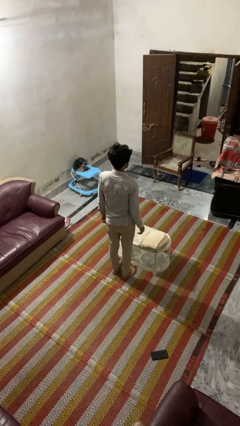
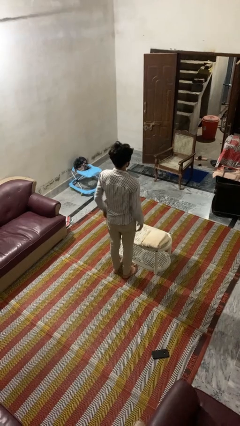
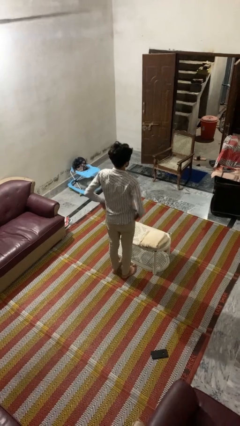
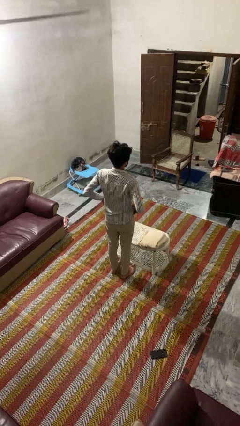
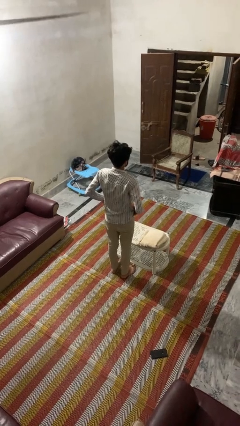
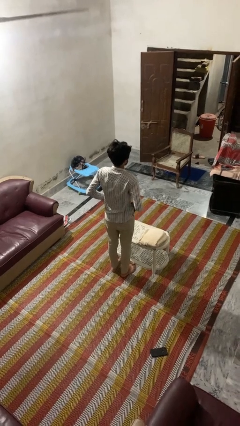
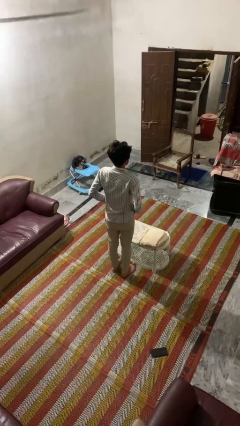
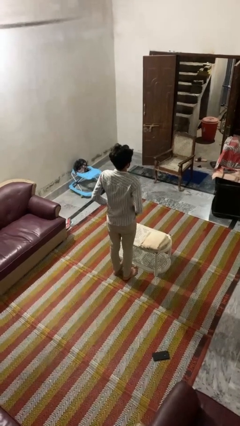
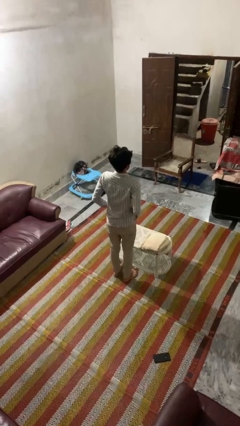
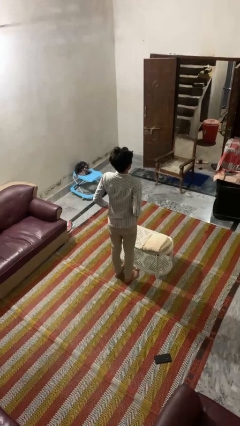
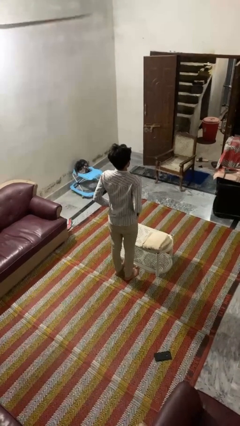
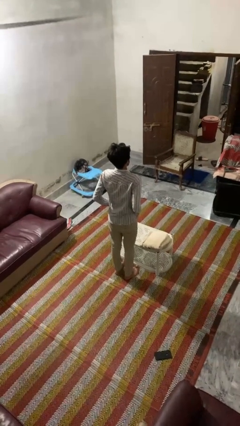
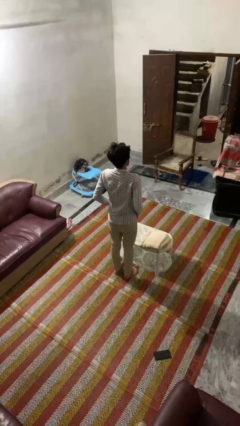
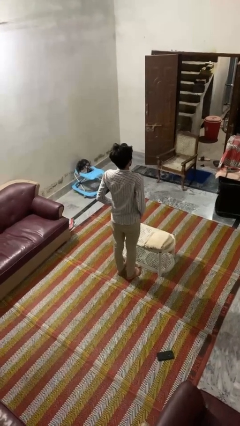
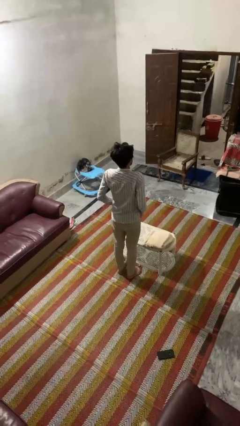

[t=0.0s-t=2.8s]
person puts hands in back pockets

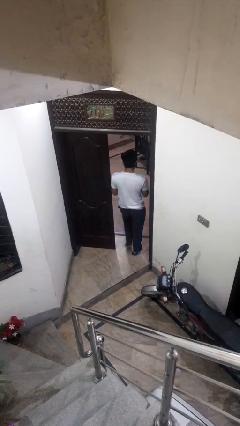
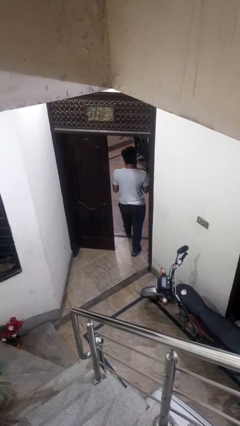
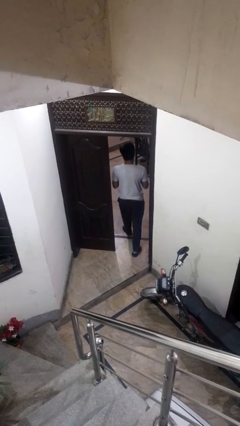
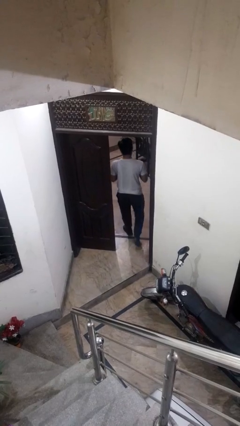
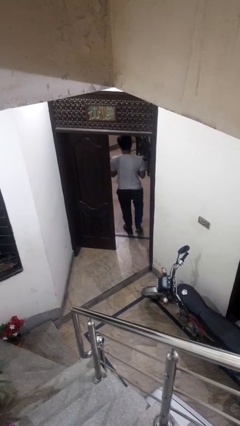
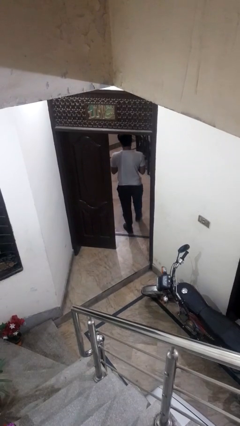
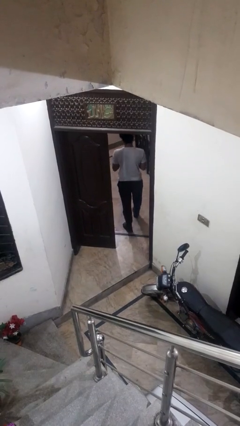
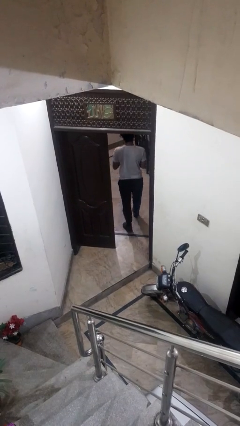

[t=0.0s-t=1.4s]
person exits scene through structure

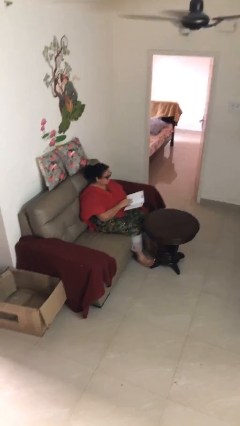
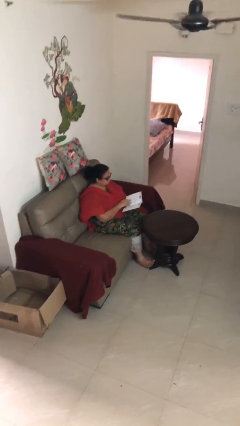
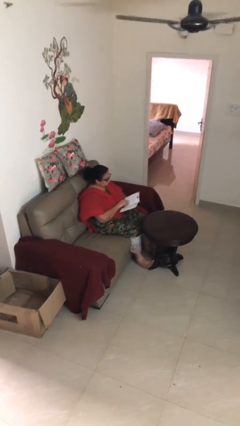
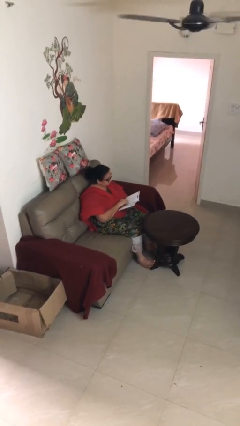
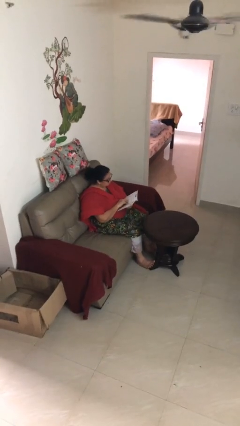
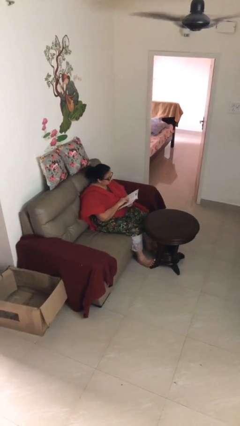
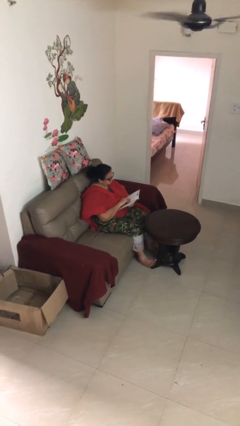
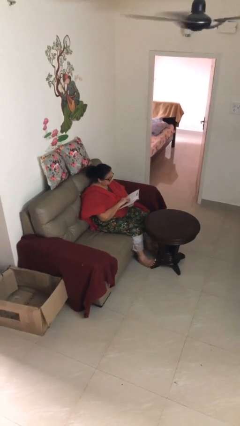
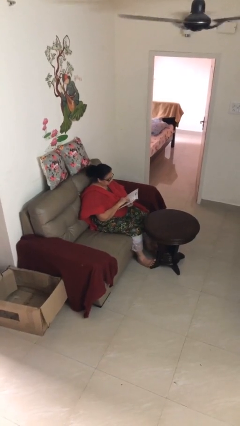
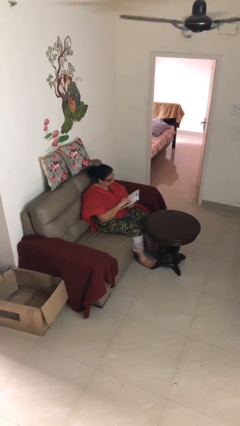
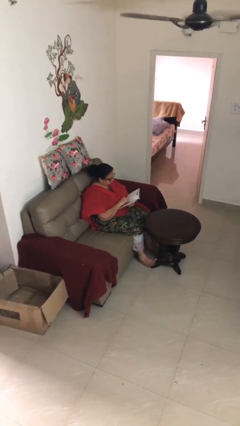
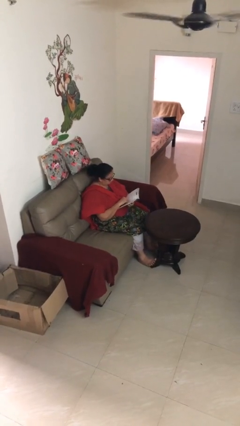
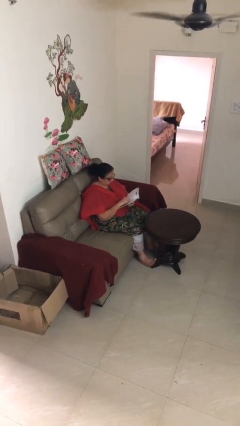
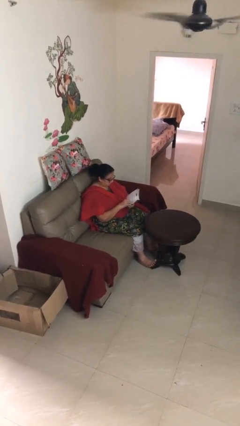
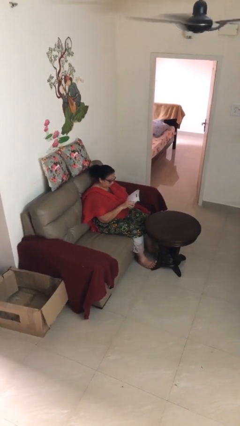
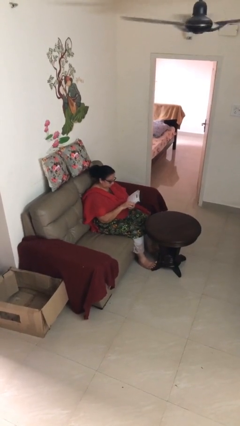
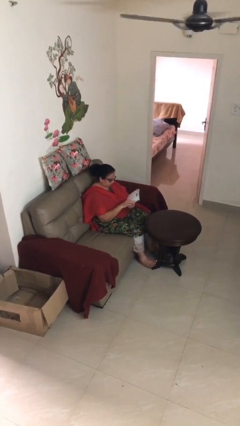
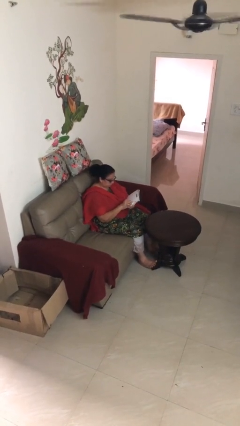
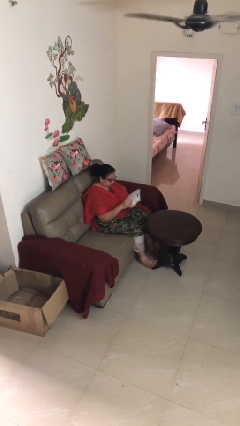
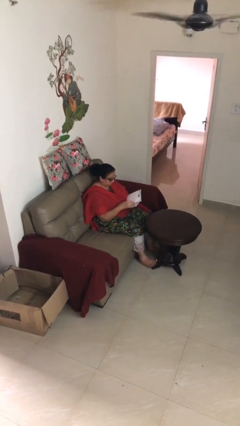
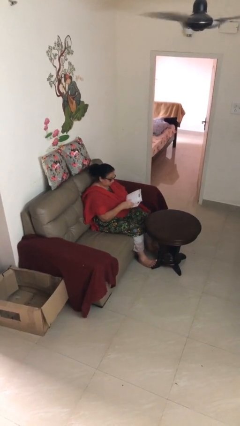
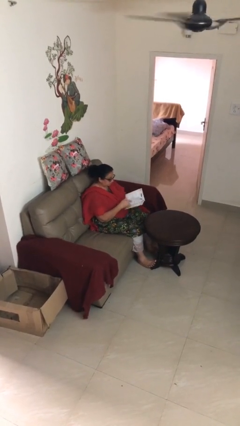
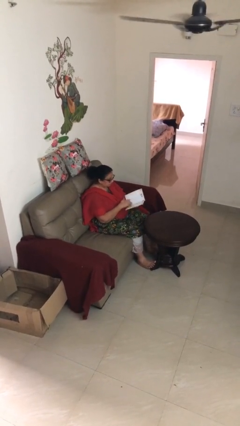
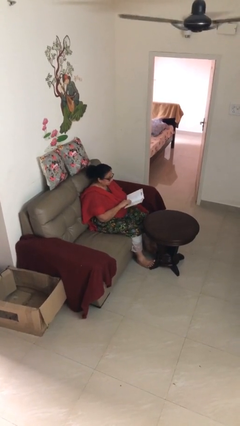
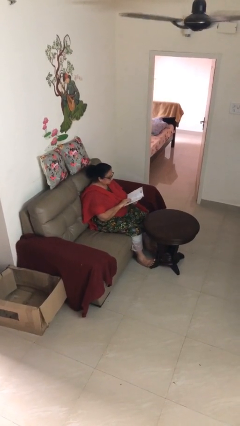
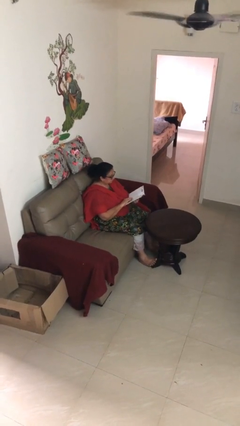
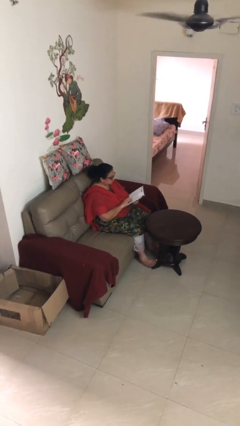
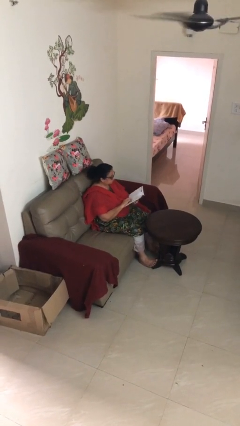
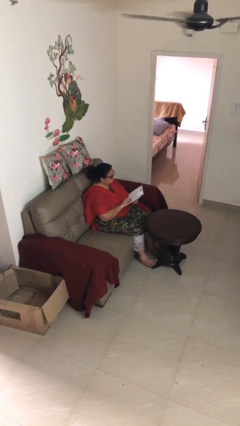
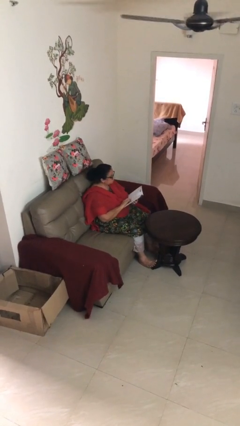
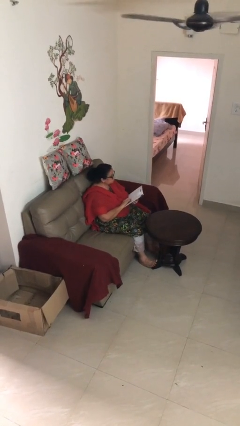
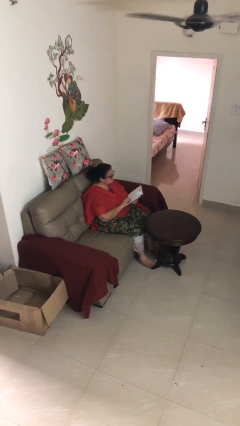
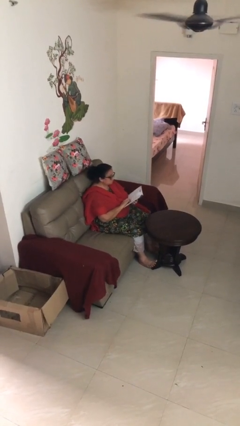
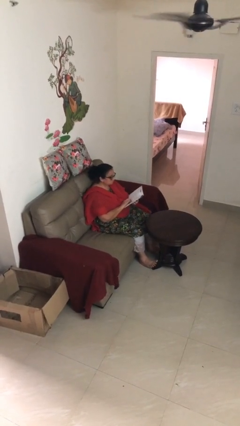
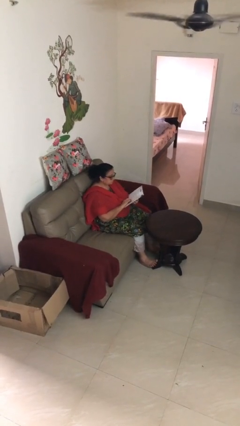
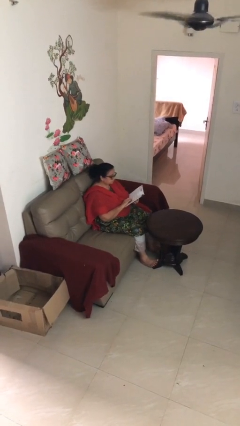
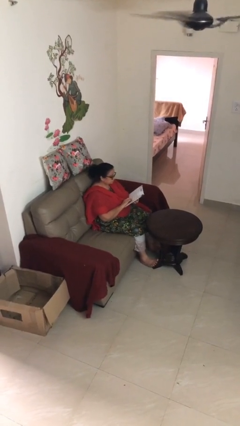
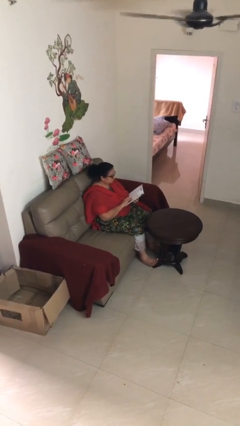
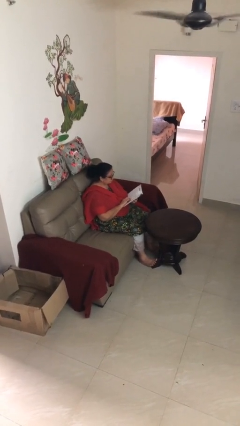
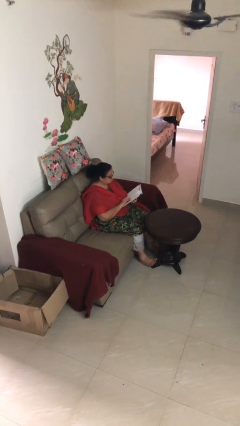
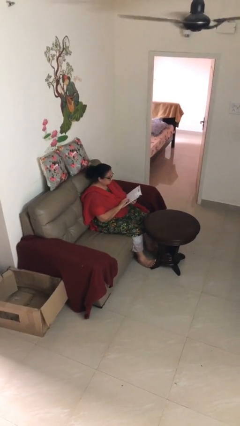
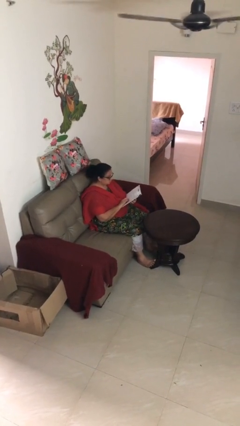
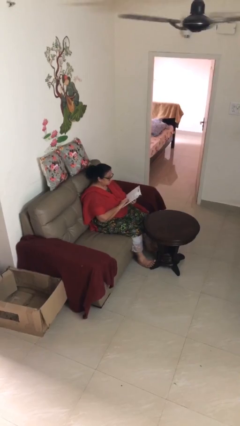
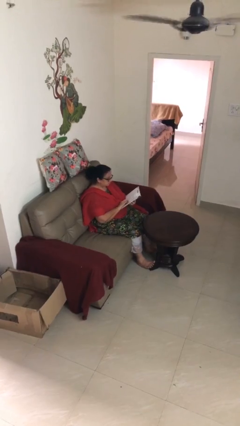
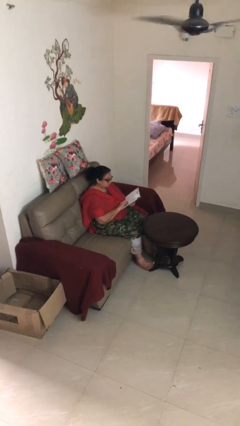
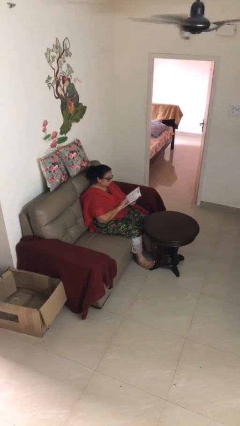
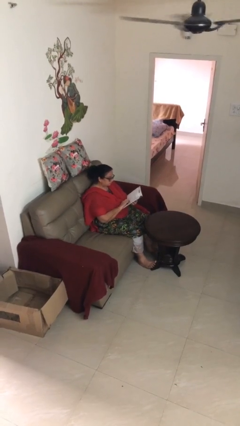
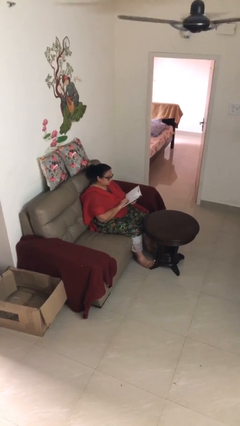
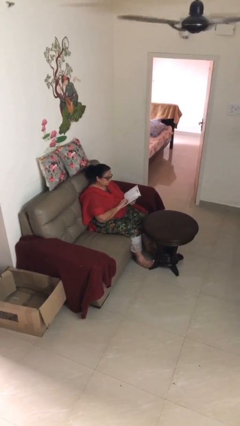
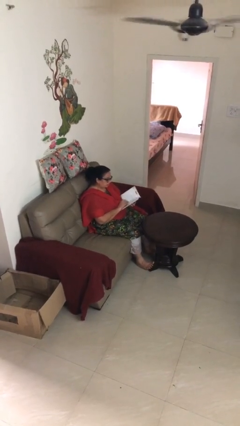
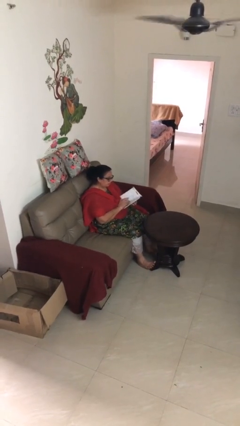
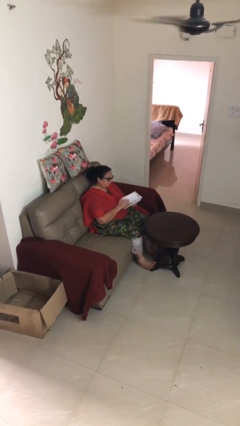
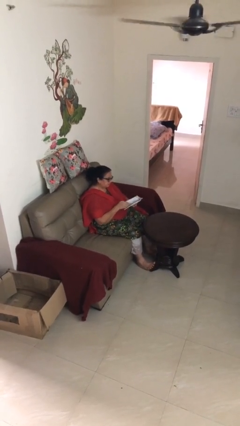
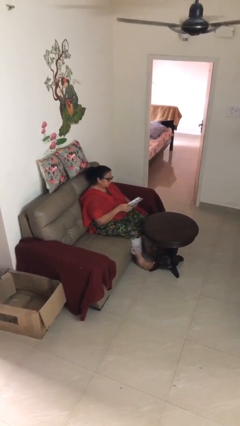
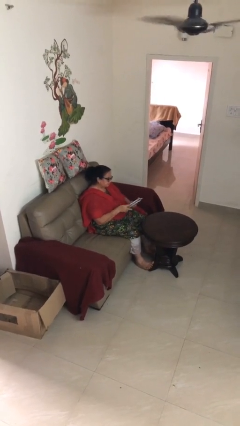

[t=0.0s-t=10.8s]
person reads document

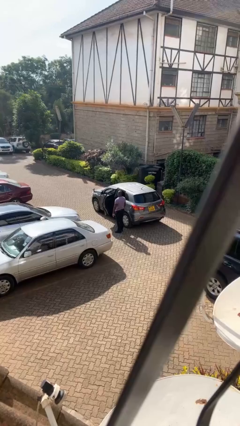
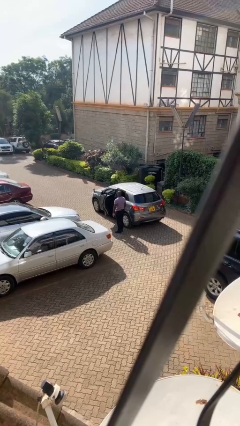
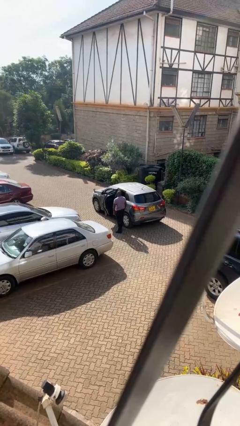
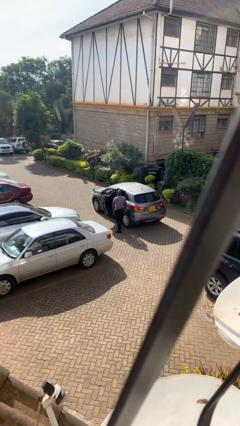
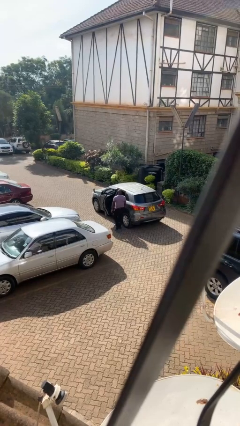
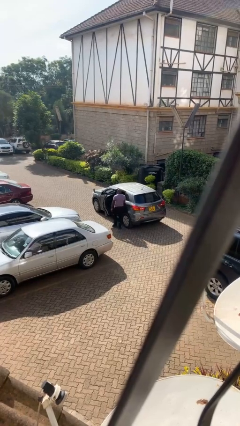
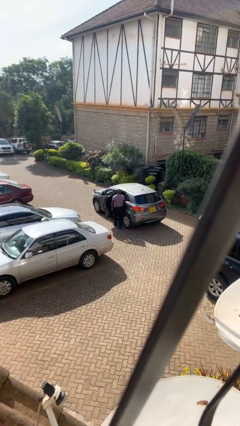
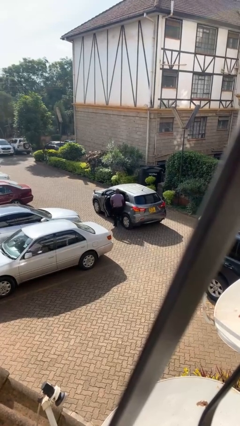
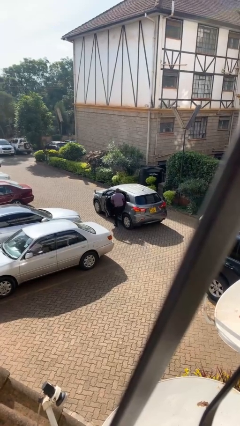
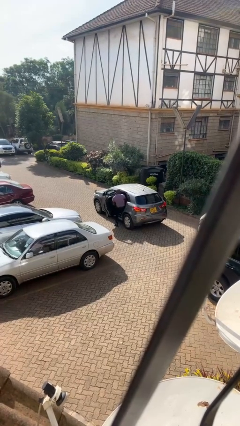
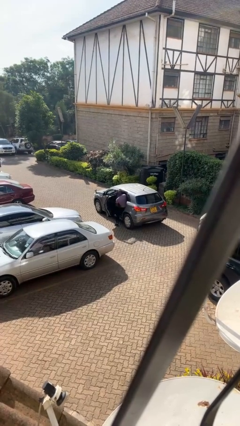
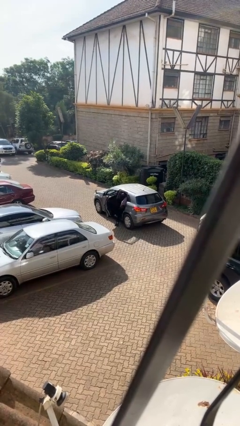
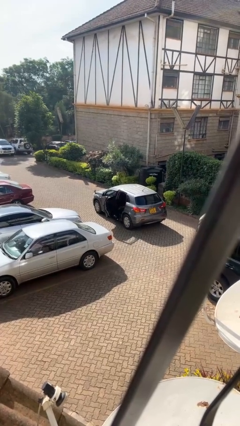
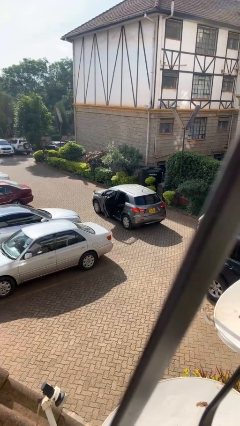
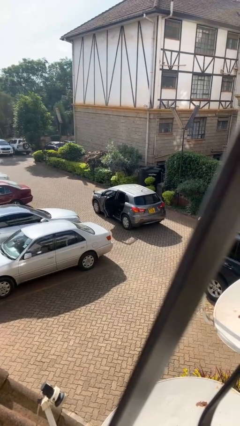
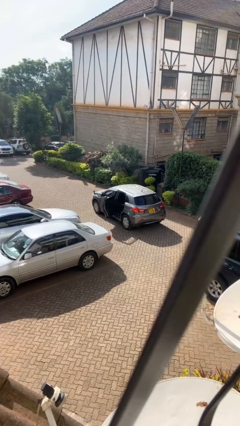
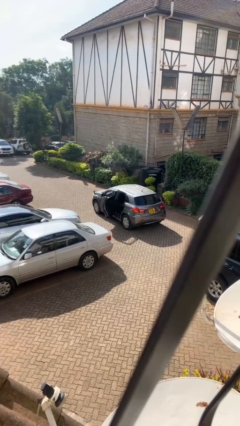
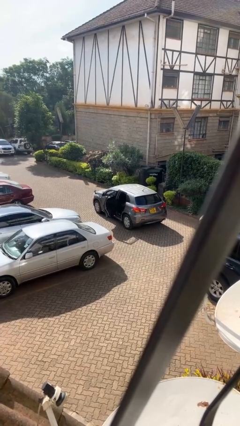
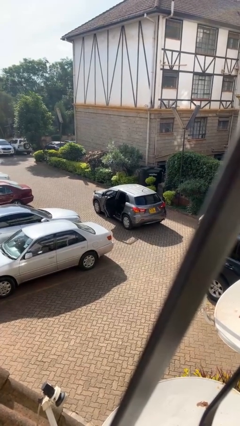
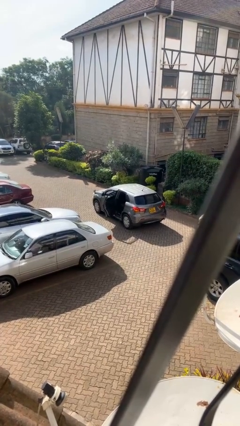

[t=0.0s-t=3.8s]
person enters car
